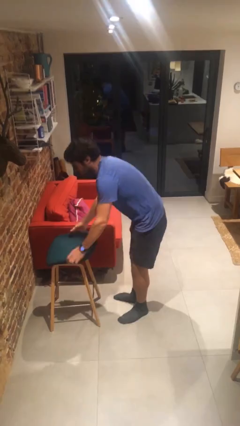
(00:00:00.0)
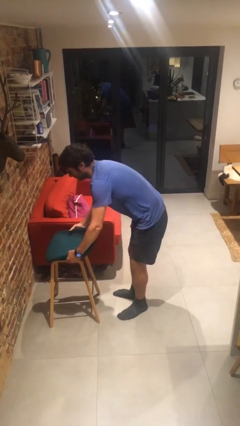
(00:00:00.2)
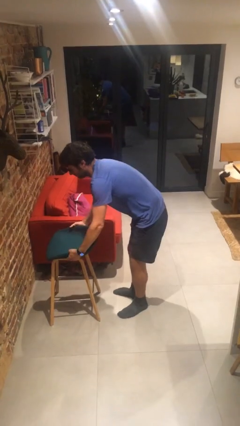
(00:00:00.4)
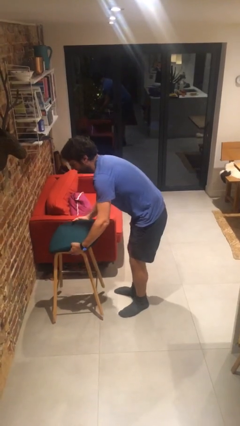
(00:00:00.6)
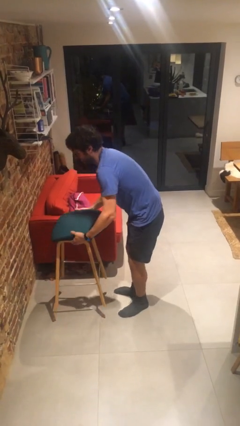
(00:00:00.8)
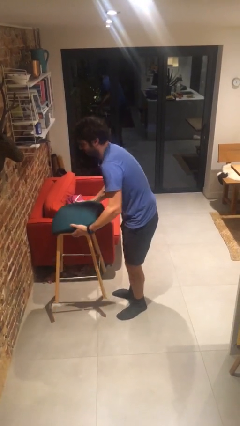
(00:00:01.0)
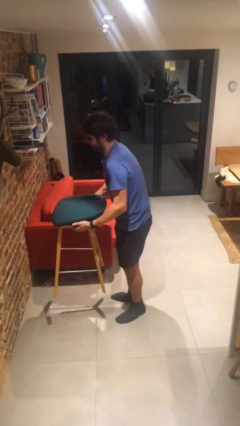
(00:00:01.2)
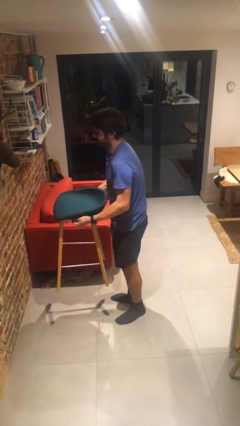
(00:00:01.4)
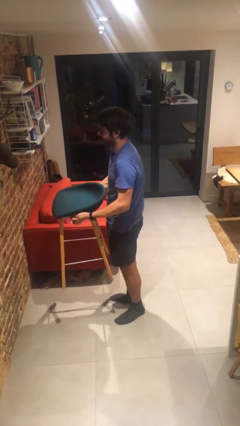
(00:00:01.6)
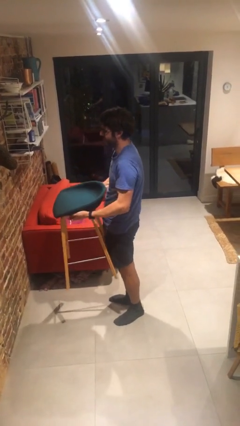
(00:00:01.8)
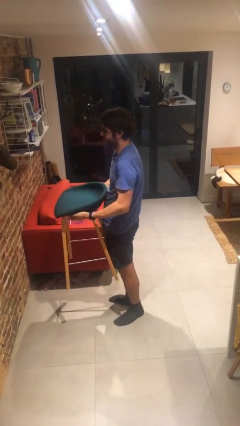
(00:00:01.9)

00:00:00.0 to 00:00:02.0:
person picks up object from floor

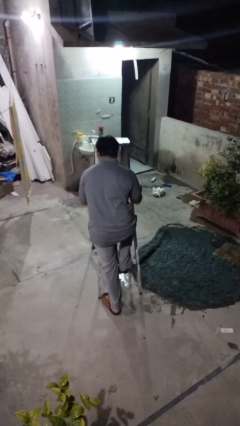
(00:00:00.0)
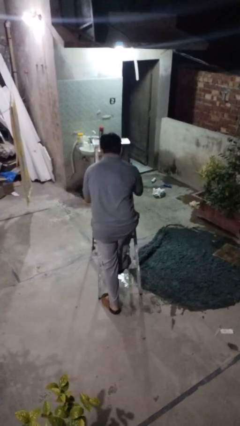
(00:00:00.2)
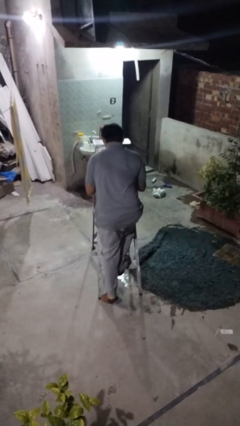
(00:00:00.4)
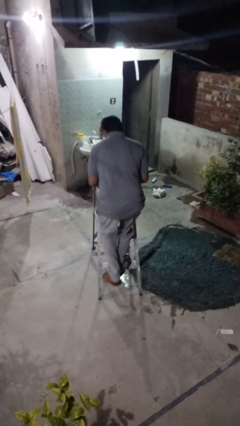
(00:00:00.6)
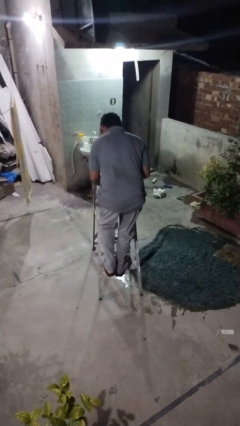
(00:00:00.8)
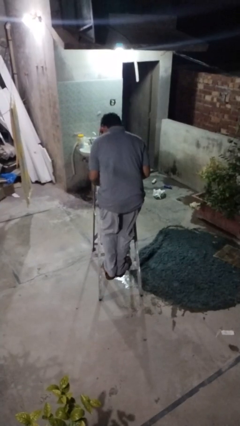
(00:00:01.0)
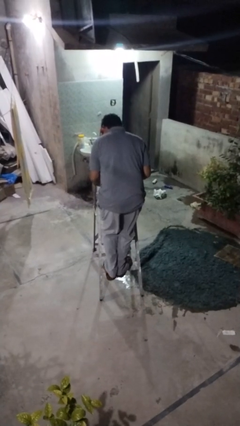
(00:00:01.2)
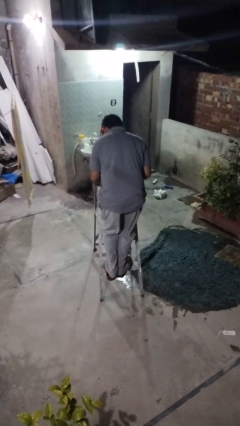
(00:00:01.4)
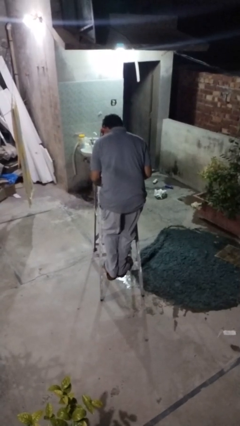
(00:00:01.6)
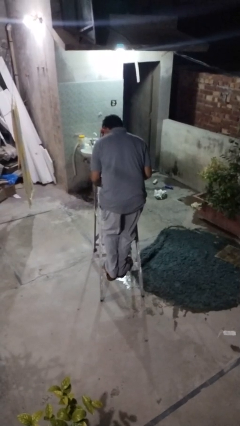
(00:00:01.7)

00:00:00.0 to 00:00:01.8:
person climbs up ladder

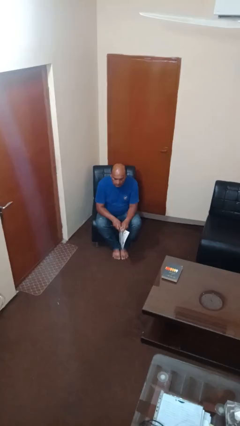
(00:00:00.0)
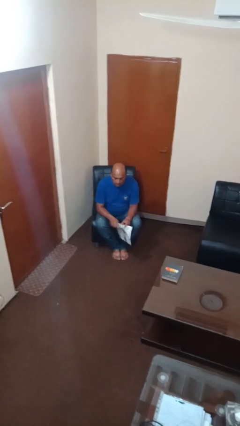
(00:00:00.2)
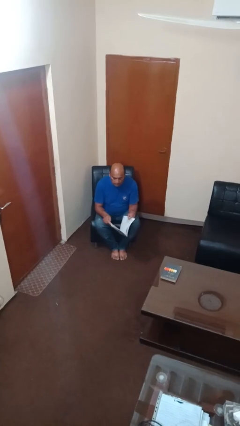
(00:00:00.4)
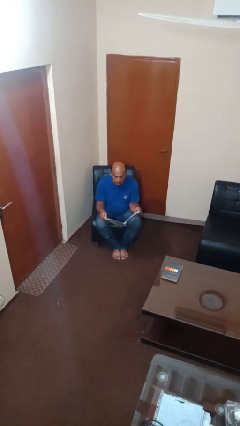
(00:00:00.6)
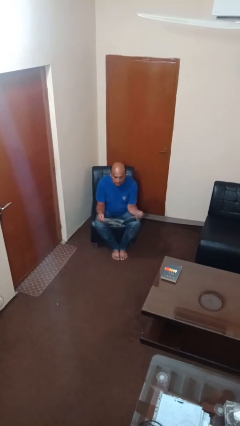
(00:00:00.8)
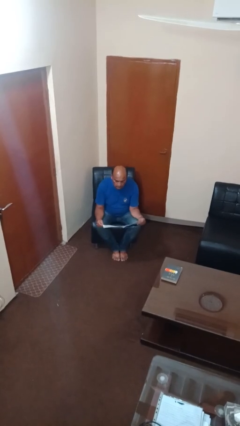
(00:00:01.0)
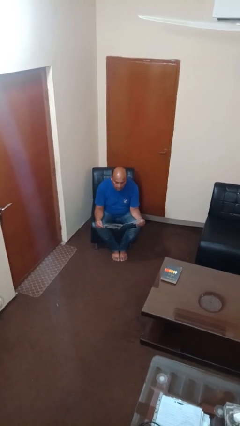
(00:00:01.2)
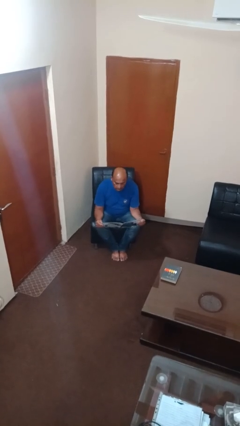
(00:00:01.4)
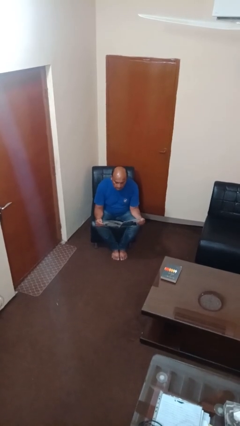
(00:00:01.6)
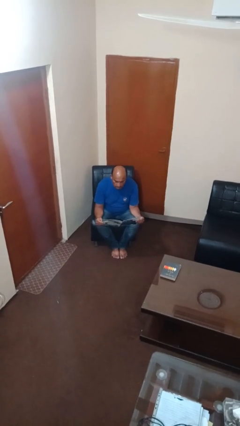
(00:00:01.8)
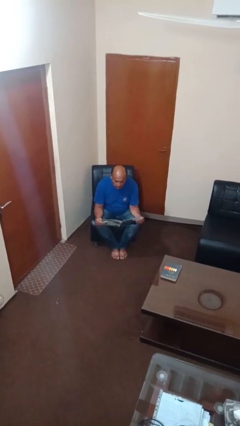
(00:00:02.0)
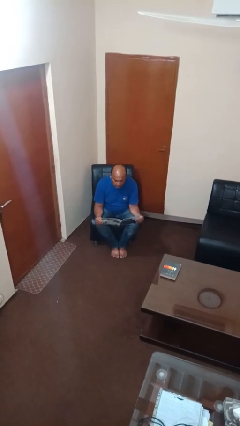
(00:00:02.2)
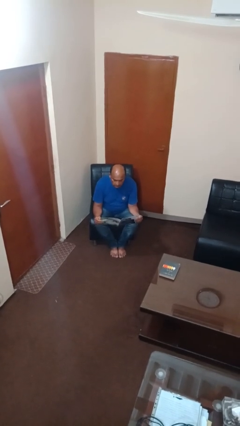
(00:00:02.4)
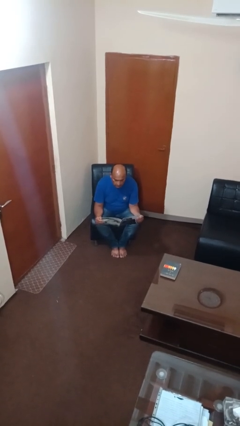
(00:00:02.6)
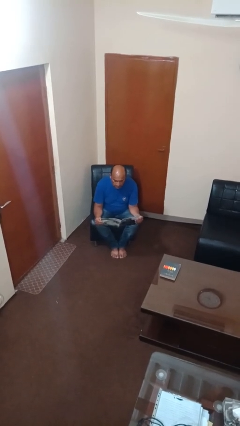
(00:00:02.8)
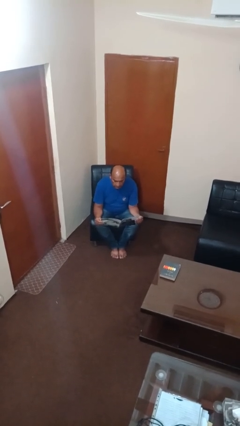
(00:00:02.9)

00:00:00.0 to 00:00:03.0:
person reads magazine

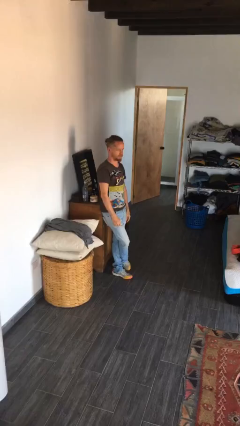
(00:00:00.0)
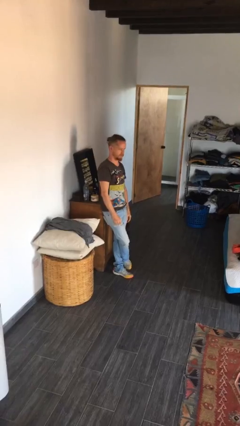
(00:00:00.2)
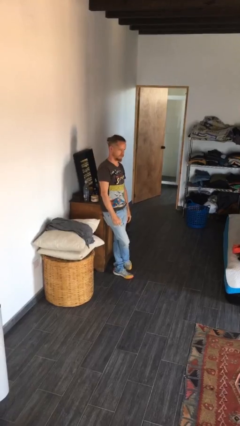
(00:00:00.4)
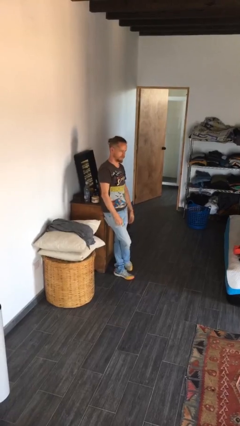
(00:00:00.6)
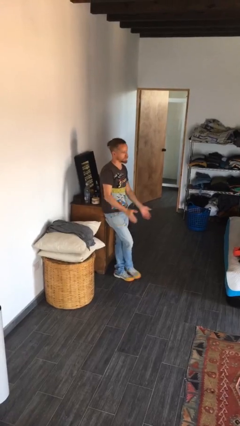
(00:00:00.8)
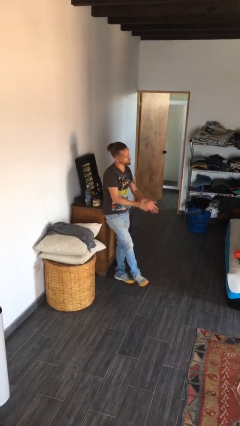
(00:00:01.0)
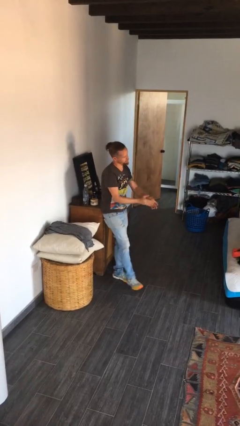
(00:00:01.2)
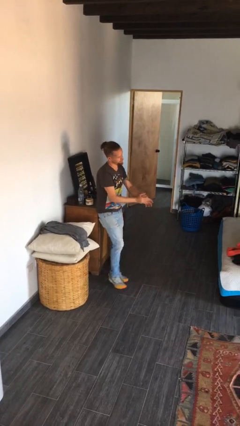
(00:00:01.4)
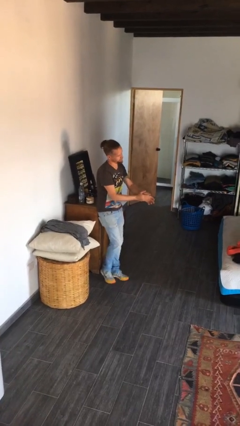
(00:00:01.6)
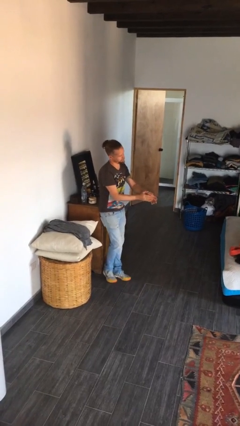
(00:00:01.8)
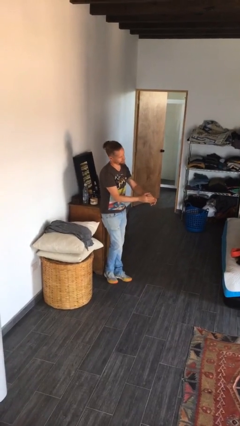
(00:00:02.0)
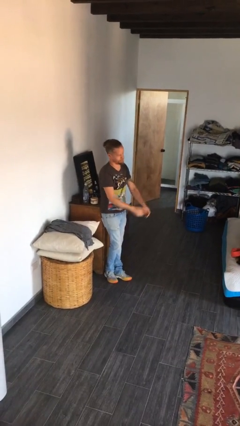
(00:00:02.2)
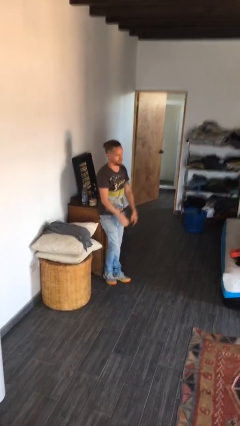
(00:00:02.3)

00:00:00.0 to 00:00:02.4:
person claps hands

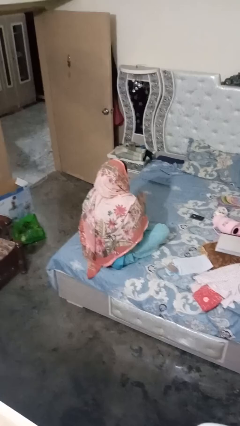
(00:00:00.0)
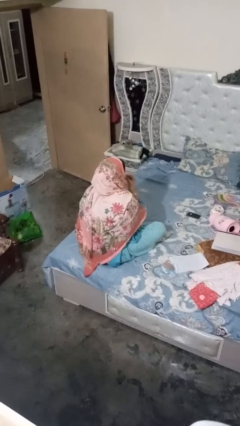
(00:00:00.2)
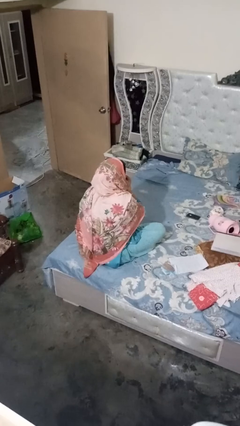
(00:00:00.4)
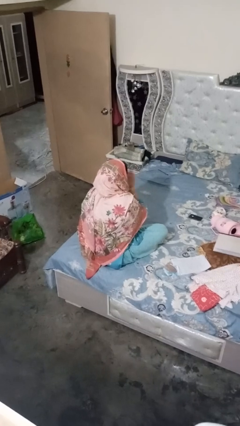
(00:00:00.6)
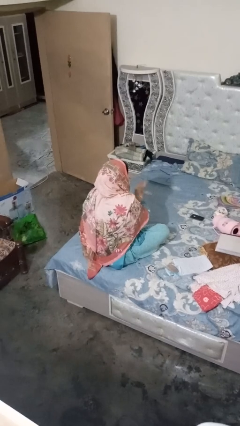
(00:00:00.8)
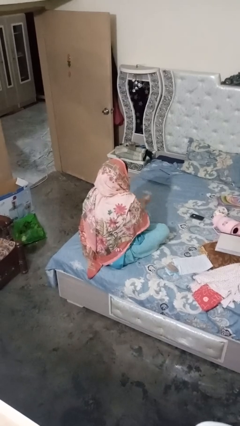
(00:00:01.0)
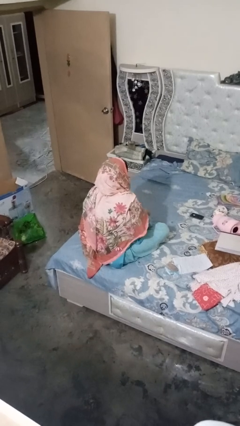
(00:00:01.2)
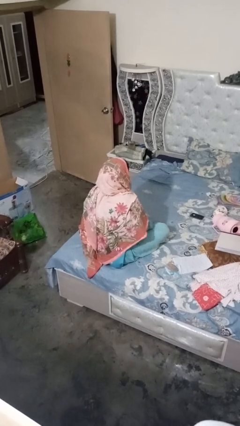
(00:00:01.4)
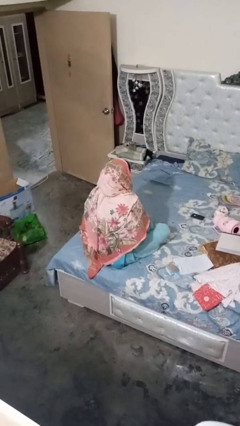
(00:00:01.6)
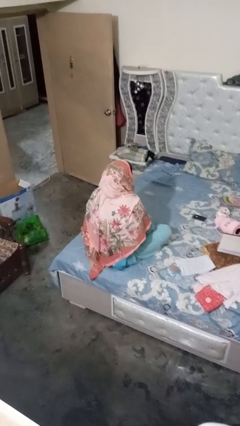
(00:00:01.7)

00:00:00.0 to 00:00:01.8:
person gestures blow kiss

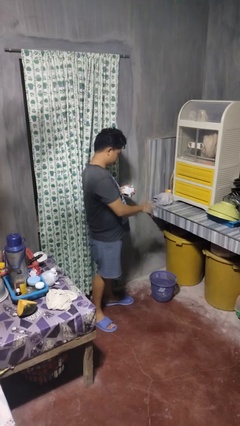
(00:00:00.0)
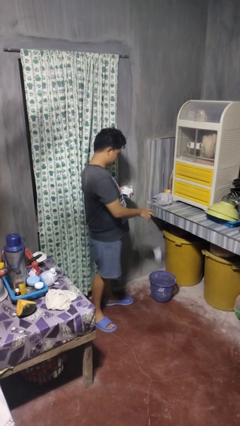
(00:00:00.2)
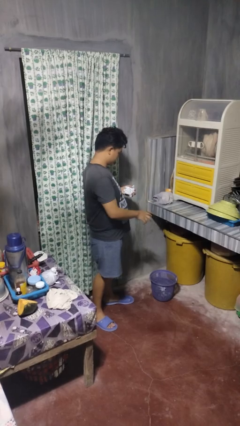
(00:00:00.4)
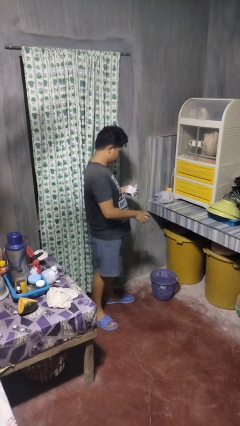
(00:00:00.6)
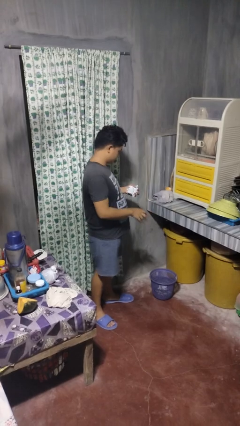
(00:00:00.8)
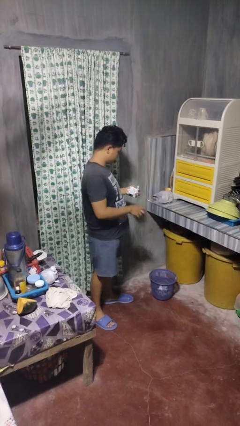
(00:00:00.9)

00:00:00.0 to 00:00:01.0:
person discards trash

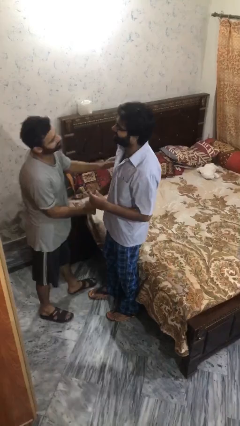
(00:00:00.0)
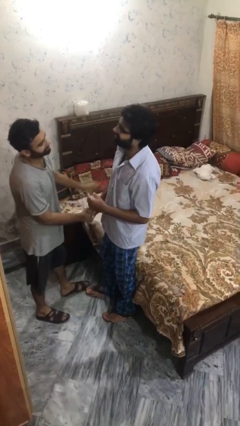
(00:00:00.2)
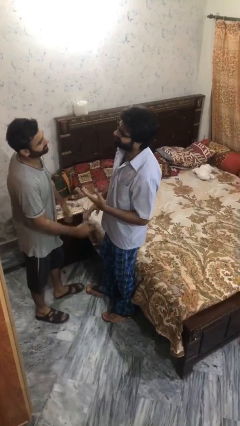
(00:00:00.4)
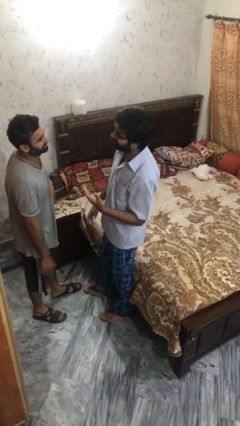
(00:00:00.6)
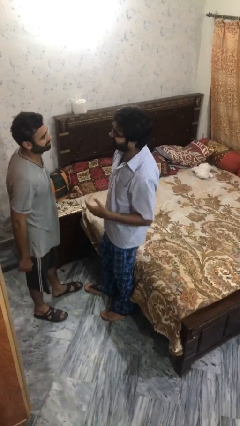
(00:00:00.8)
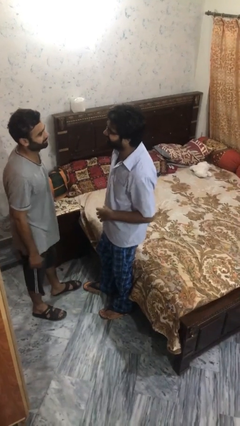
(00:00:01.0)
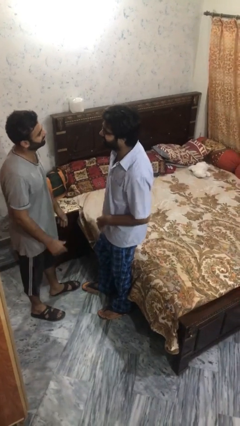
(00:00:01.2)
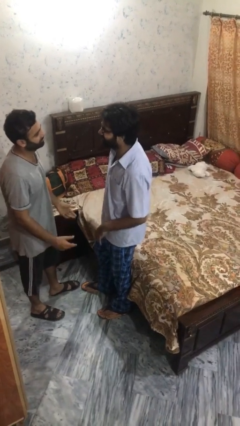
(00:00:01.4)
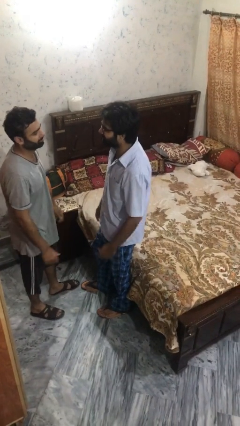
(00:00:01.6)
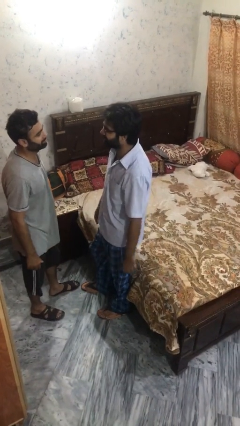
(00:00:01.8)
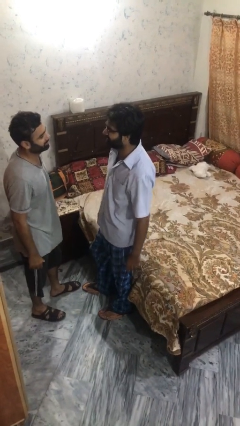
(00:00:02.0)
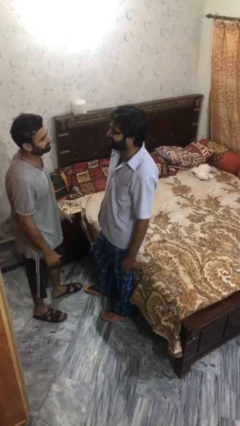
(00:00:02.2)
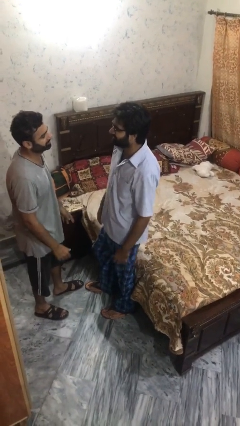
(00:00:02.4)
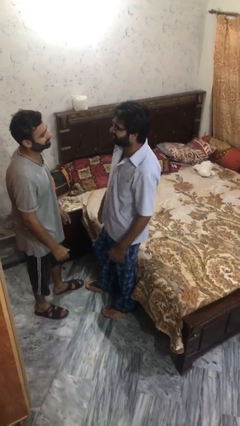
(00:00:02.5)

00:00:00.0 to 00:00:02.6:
person talks to person

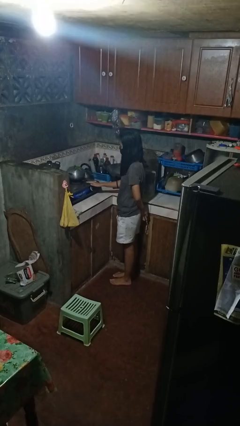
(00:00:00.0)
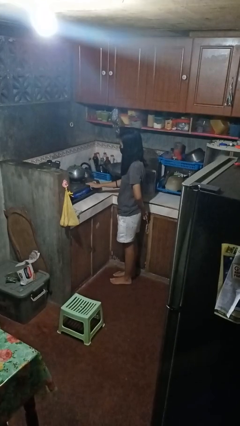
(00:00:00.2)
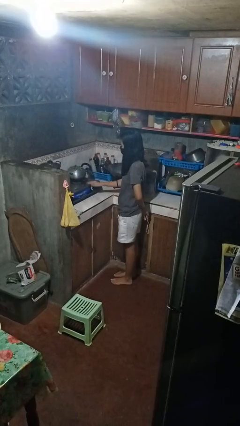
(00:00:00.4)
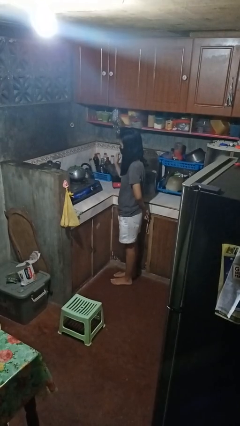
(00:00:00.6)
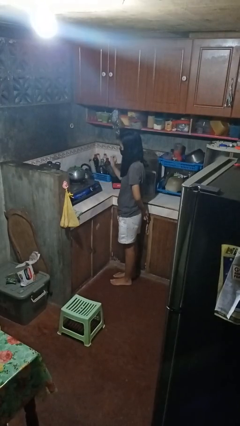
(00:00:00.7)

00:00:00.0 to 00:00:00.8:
person burns hand

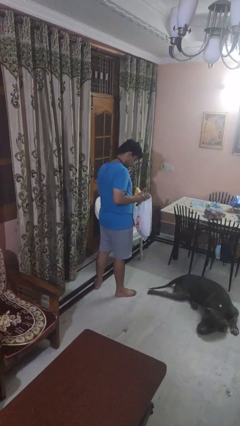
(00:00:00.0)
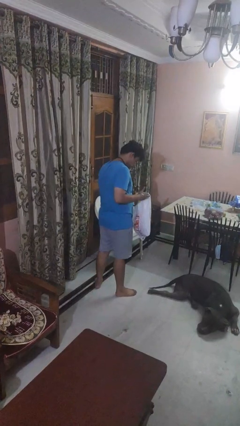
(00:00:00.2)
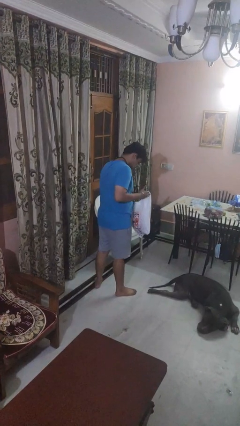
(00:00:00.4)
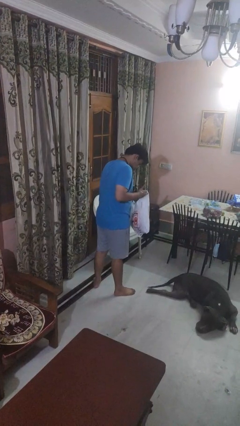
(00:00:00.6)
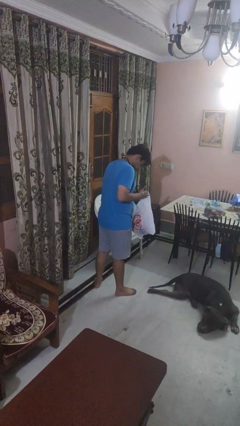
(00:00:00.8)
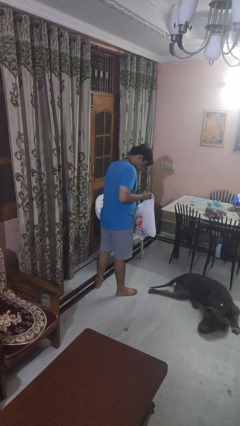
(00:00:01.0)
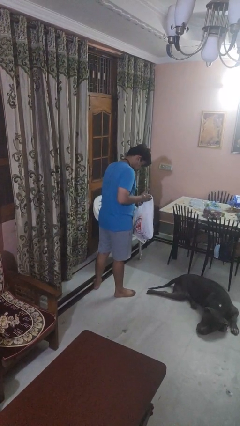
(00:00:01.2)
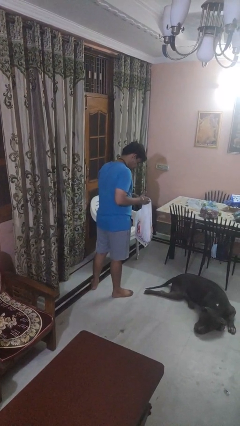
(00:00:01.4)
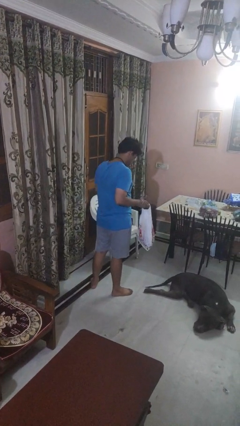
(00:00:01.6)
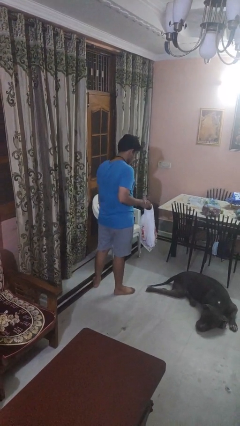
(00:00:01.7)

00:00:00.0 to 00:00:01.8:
person puts object into bag
